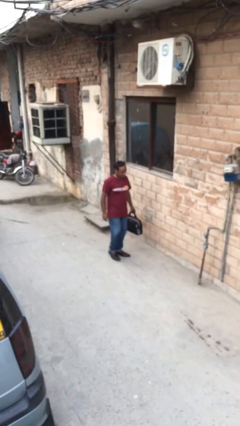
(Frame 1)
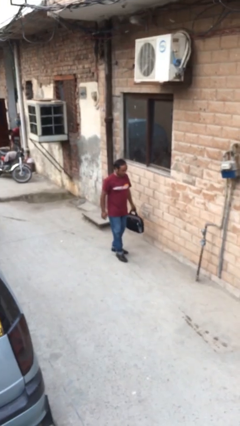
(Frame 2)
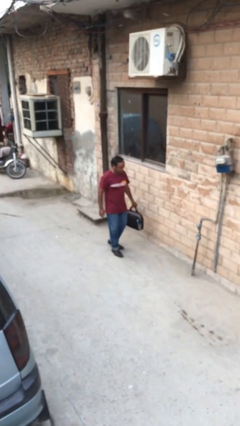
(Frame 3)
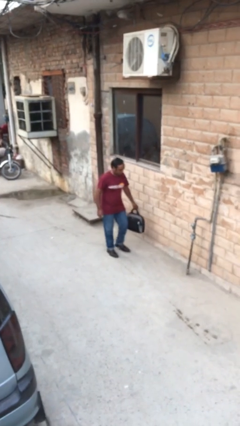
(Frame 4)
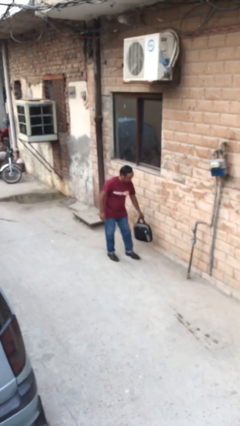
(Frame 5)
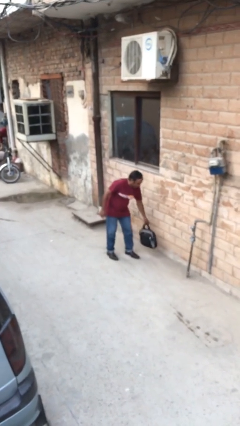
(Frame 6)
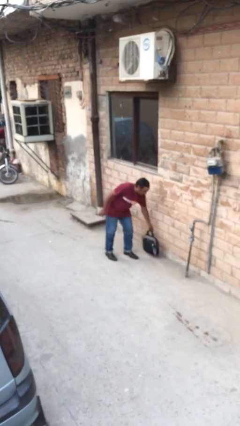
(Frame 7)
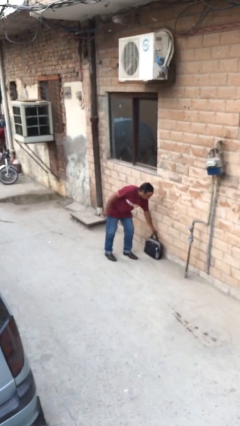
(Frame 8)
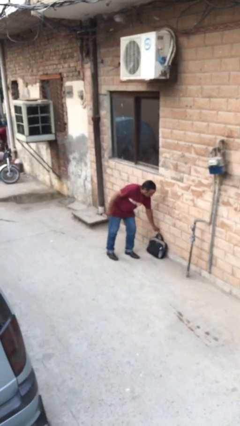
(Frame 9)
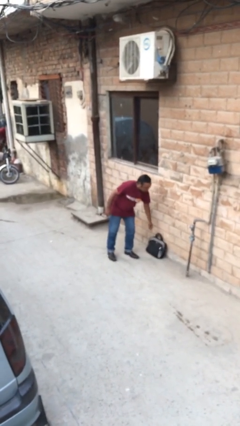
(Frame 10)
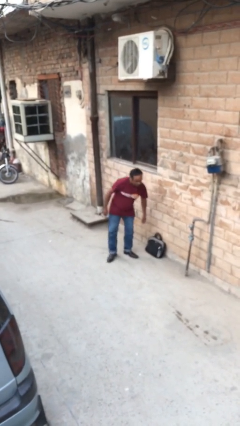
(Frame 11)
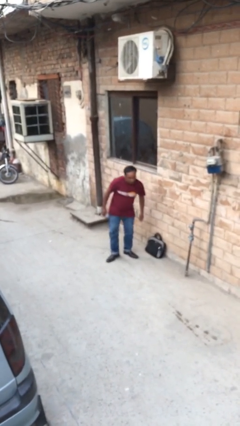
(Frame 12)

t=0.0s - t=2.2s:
person puts down object on floor

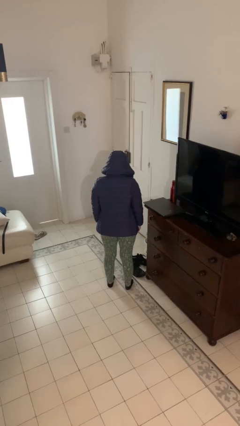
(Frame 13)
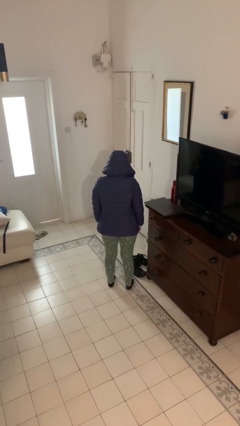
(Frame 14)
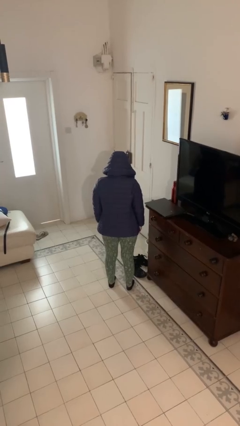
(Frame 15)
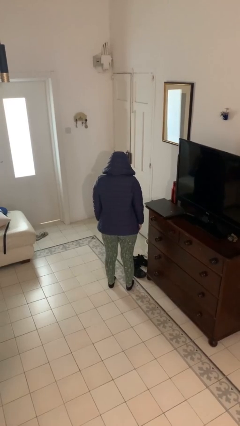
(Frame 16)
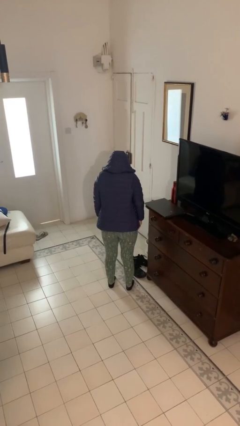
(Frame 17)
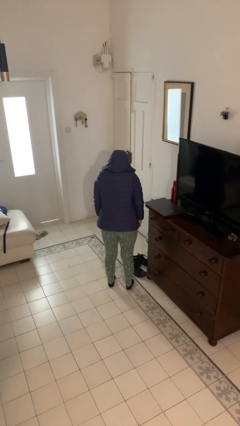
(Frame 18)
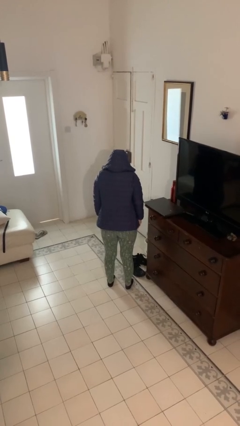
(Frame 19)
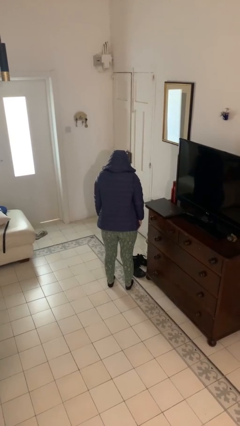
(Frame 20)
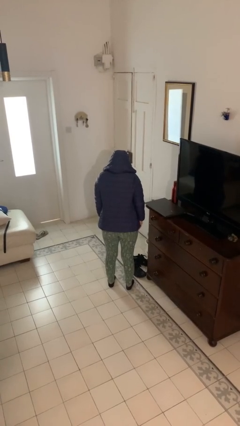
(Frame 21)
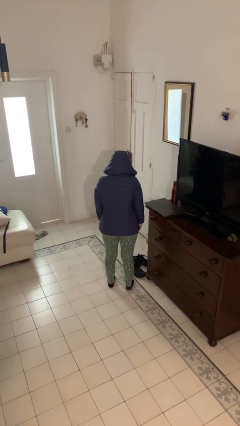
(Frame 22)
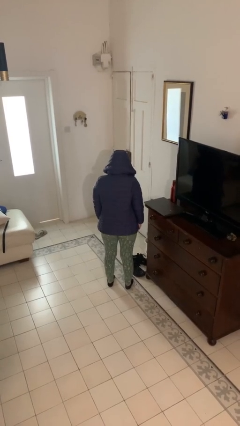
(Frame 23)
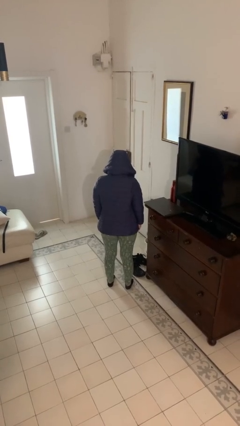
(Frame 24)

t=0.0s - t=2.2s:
person shrugs

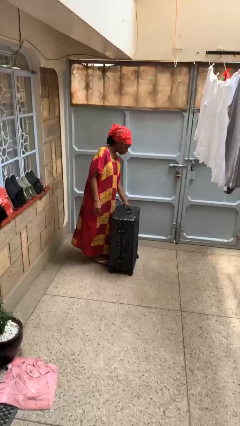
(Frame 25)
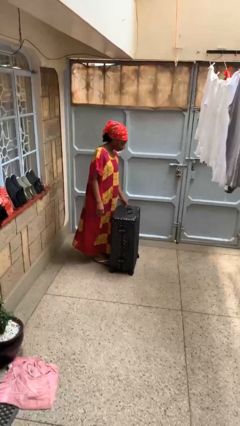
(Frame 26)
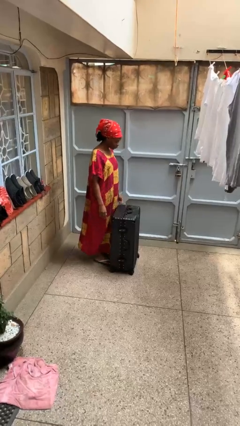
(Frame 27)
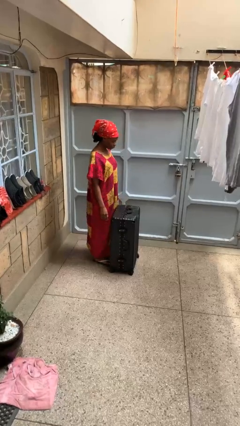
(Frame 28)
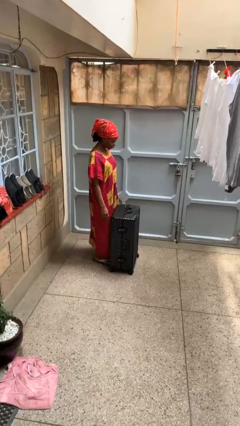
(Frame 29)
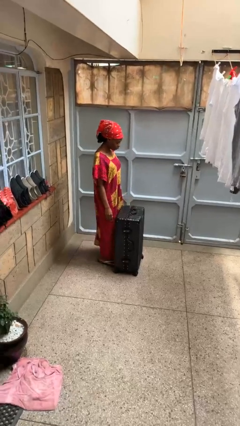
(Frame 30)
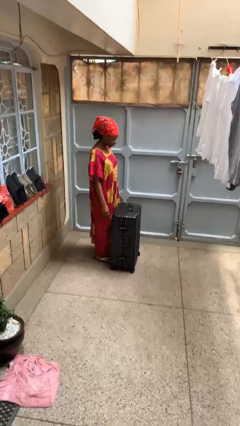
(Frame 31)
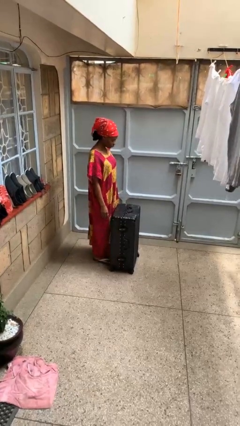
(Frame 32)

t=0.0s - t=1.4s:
person closes suitcase

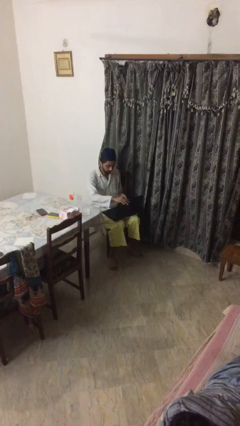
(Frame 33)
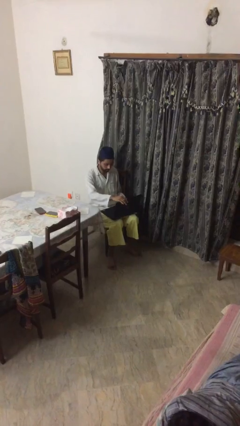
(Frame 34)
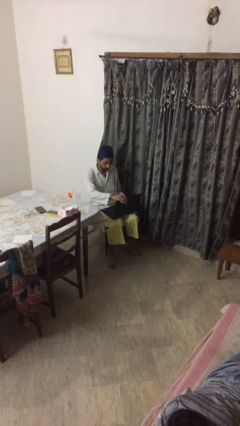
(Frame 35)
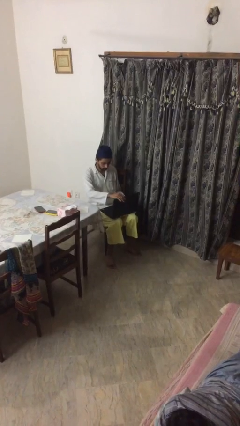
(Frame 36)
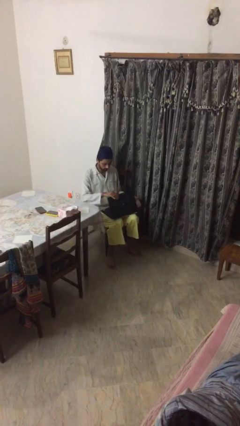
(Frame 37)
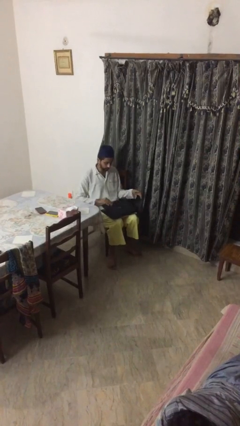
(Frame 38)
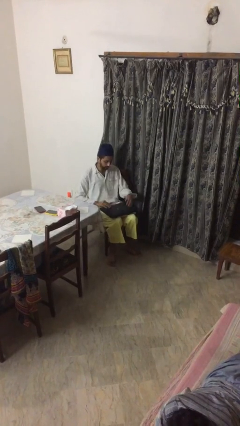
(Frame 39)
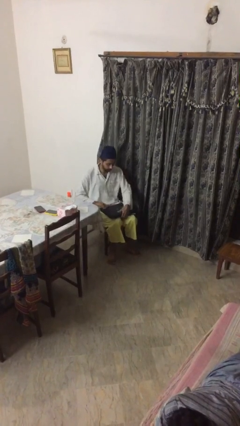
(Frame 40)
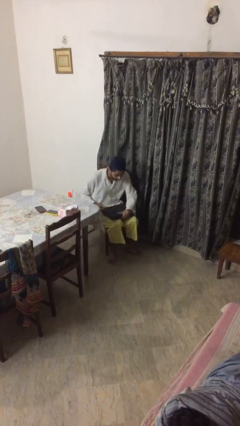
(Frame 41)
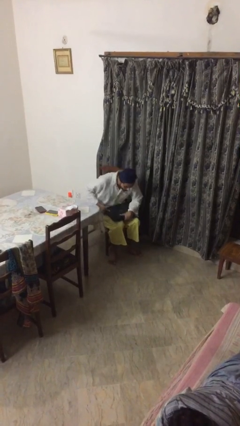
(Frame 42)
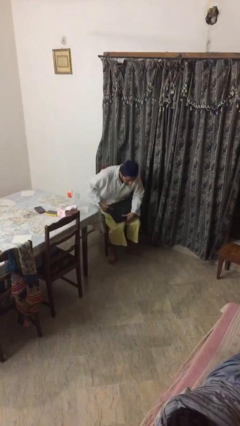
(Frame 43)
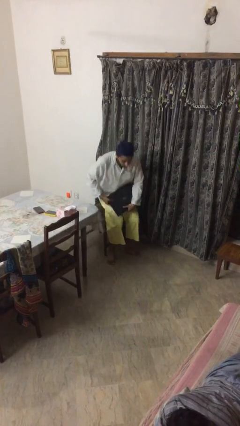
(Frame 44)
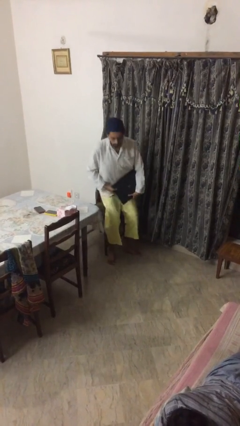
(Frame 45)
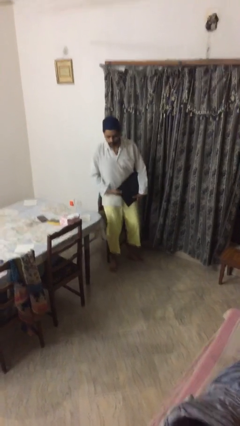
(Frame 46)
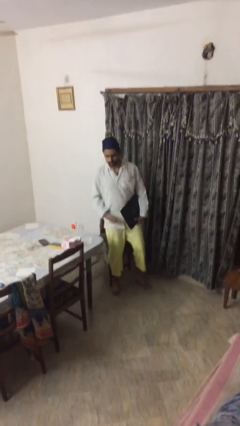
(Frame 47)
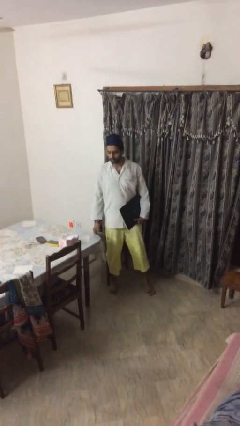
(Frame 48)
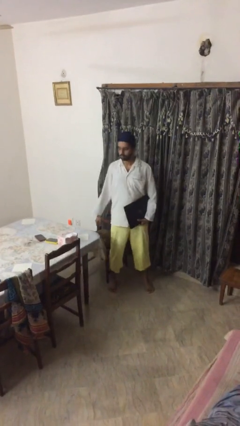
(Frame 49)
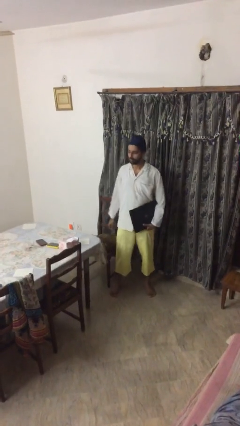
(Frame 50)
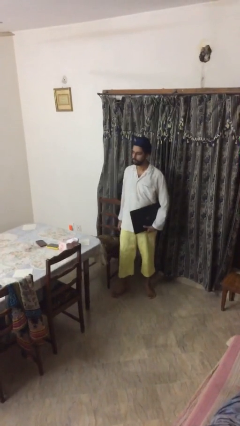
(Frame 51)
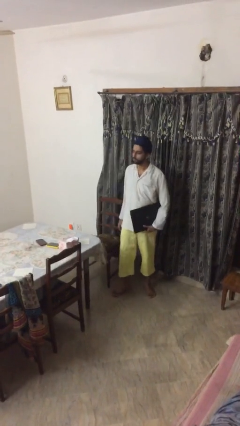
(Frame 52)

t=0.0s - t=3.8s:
person stands up

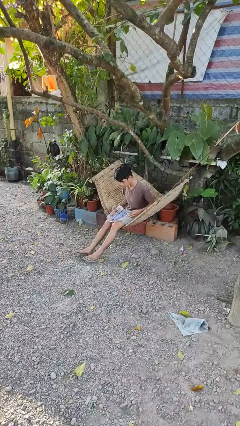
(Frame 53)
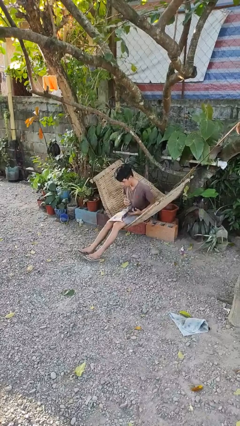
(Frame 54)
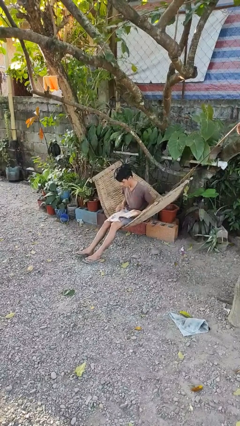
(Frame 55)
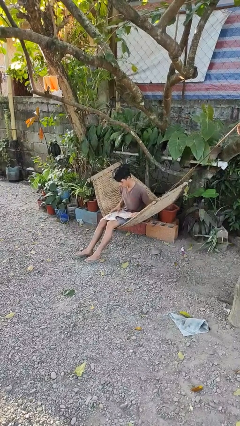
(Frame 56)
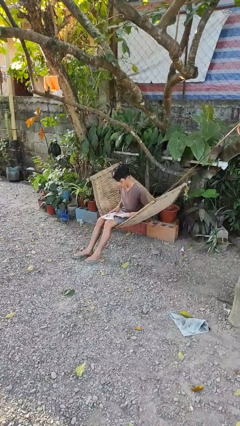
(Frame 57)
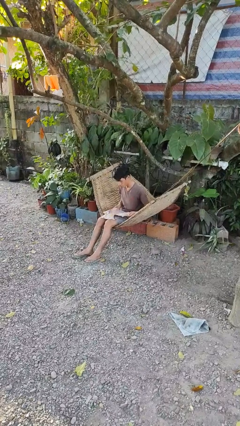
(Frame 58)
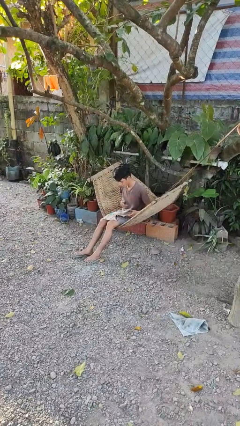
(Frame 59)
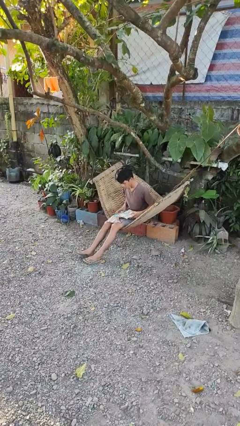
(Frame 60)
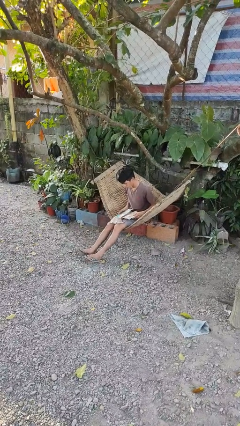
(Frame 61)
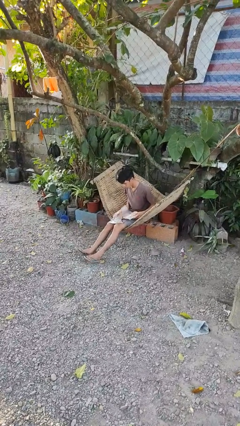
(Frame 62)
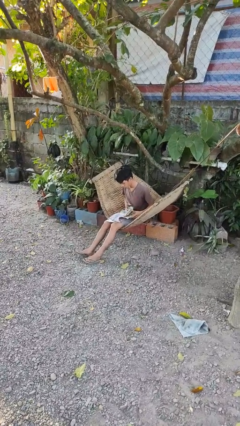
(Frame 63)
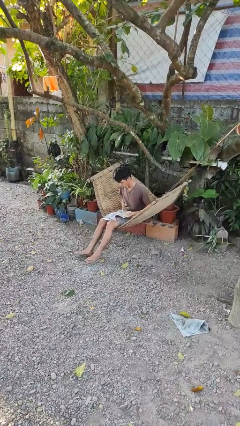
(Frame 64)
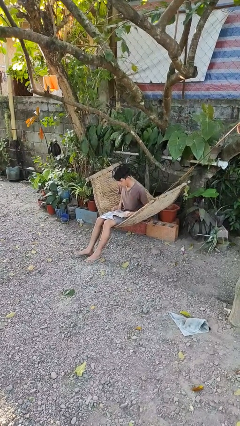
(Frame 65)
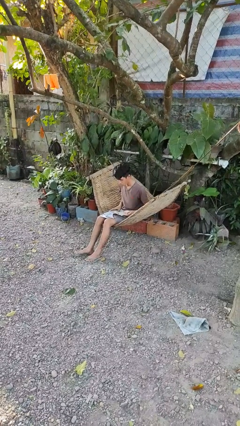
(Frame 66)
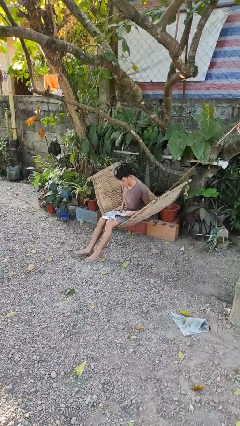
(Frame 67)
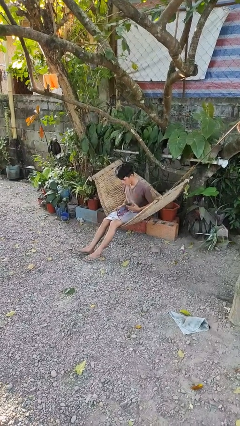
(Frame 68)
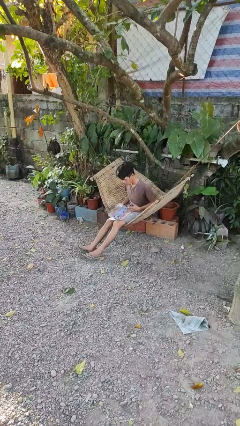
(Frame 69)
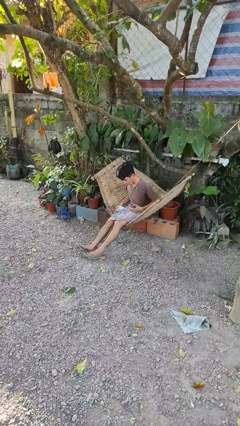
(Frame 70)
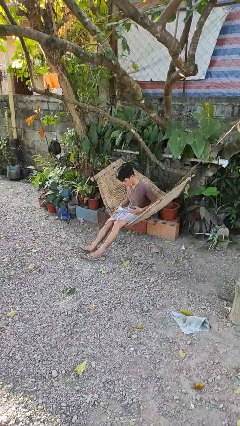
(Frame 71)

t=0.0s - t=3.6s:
person reads magazine

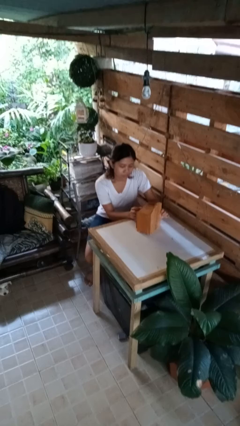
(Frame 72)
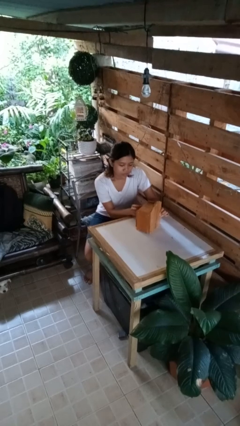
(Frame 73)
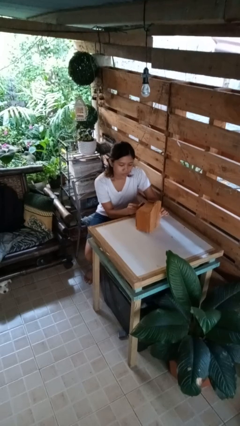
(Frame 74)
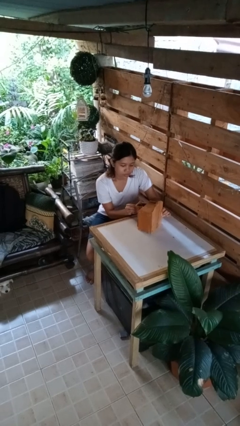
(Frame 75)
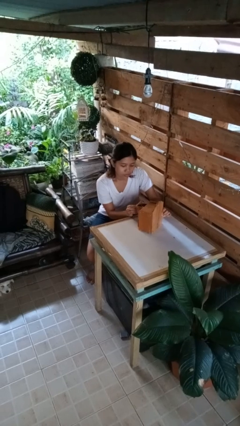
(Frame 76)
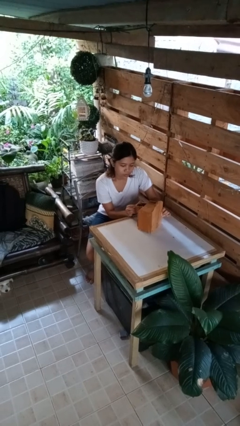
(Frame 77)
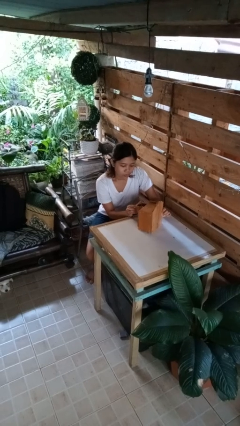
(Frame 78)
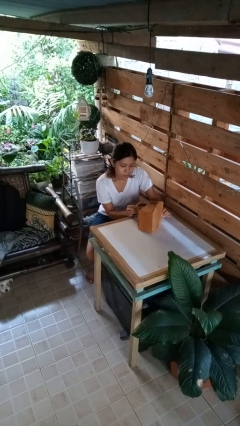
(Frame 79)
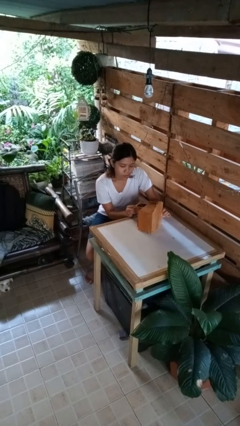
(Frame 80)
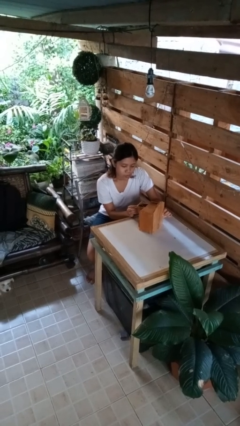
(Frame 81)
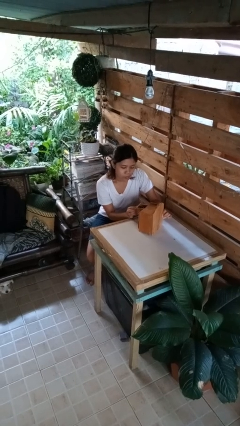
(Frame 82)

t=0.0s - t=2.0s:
person opens jewelry box

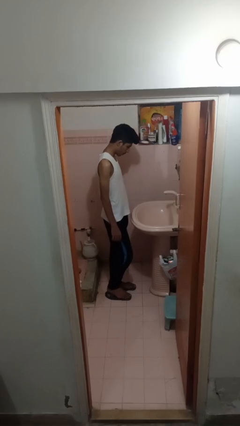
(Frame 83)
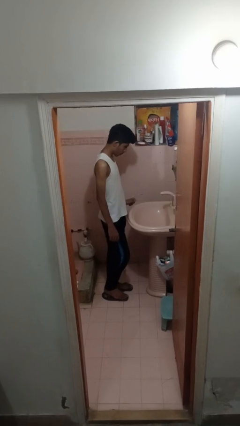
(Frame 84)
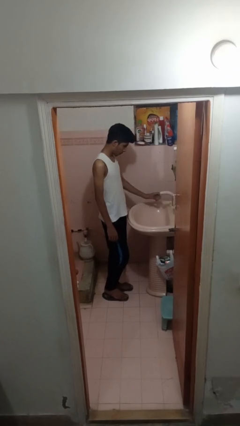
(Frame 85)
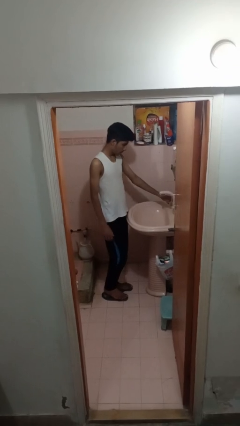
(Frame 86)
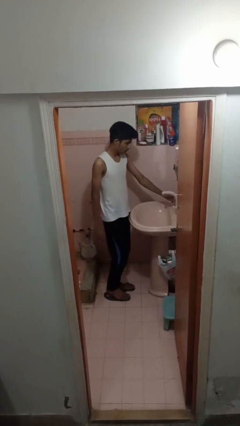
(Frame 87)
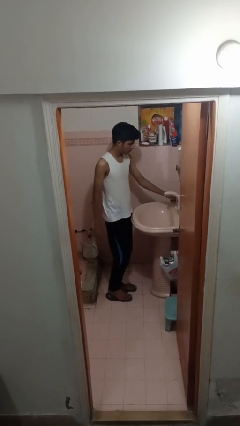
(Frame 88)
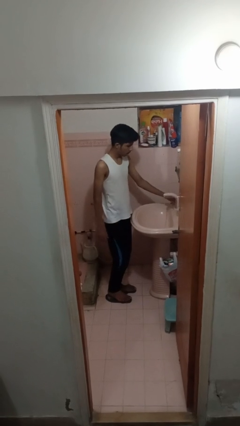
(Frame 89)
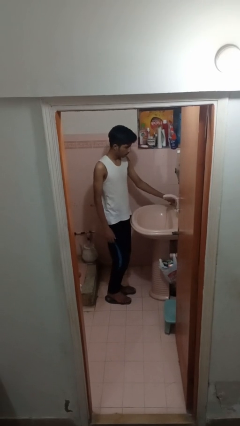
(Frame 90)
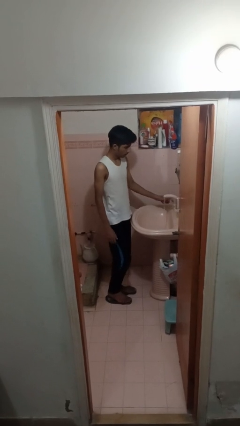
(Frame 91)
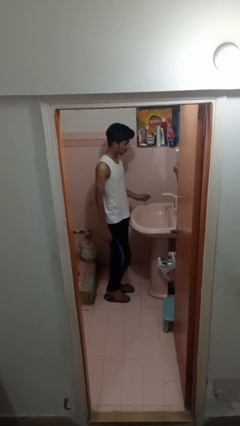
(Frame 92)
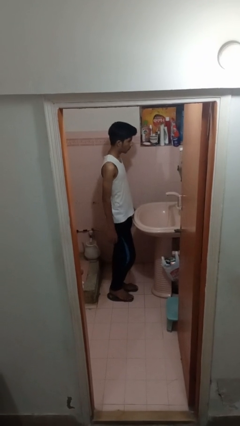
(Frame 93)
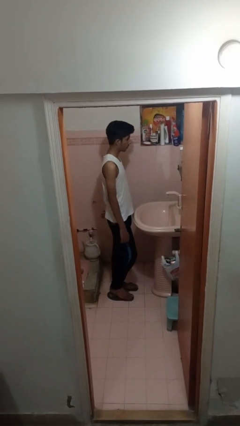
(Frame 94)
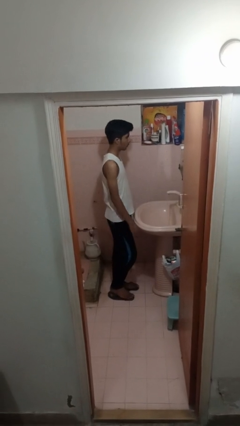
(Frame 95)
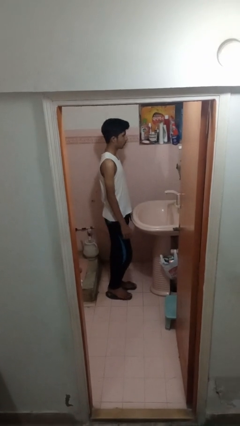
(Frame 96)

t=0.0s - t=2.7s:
person turns on faucet
